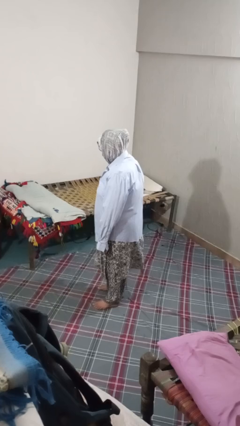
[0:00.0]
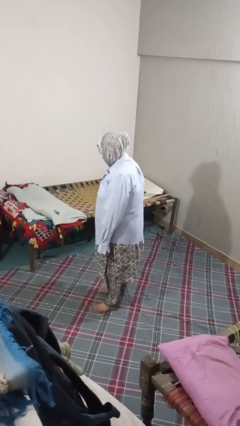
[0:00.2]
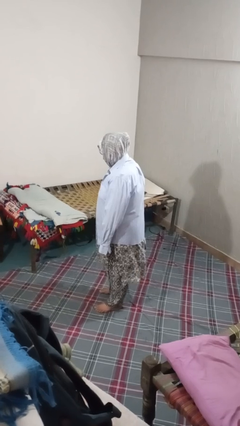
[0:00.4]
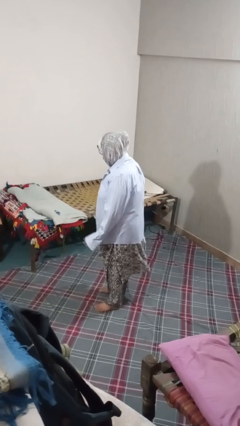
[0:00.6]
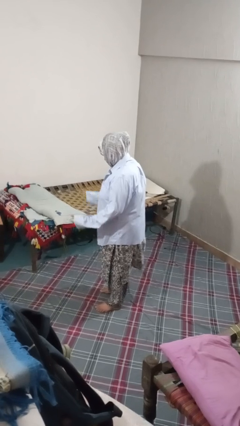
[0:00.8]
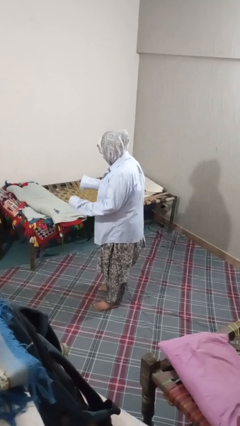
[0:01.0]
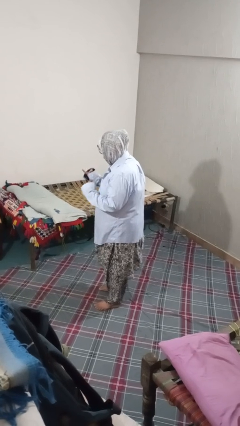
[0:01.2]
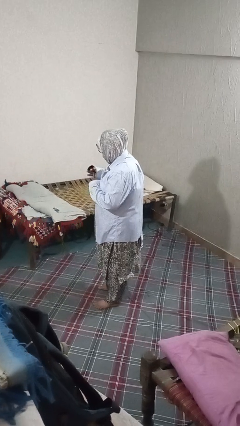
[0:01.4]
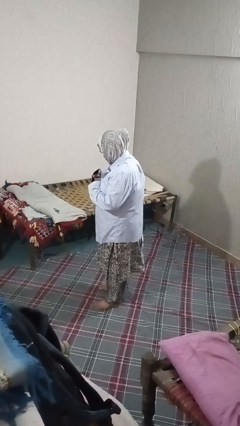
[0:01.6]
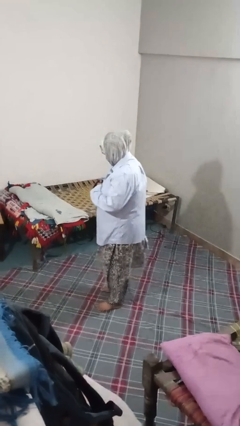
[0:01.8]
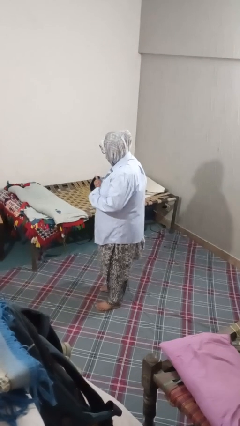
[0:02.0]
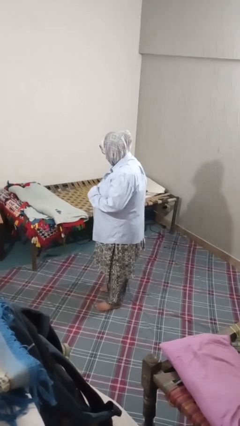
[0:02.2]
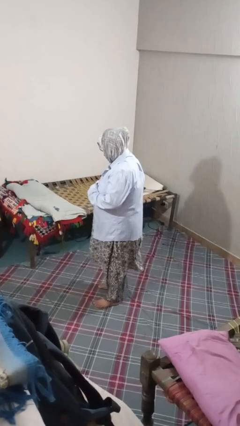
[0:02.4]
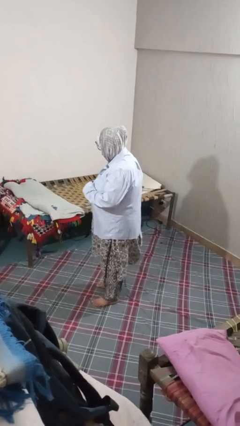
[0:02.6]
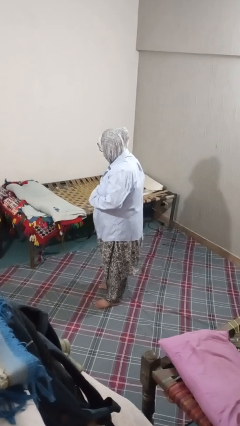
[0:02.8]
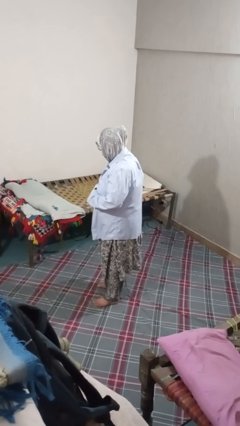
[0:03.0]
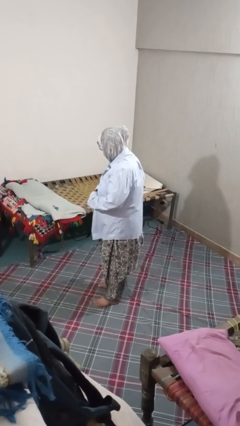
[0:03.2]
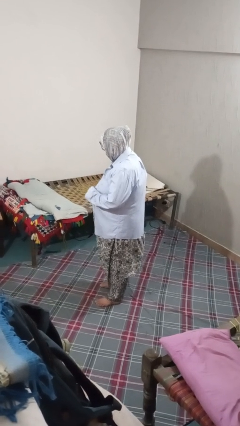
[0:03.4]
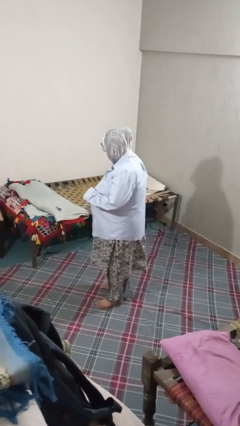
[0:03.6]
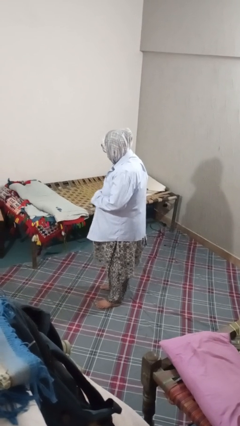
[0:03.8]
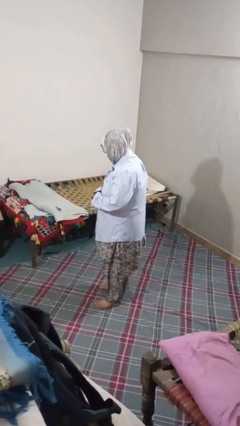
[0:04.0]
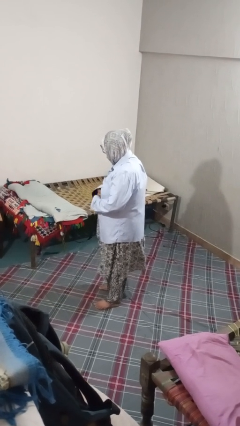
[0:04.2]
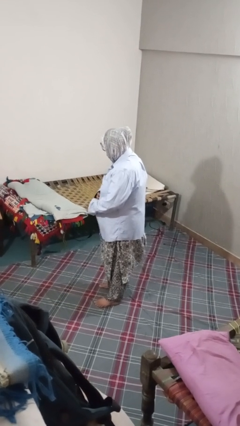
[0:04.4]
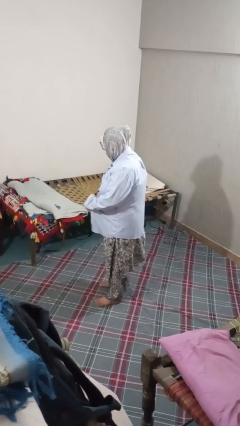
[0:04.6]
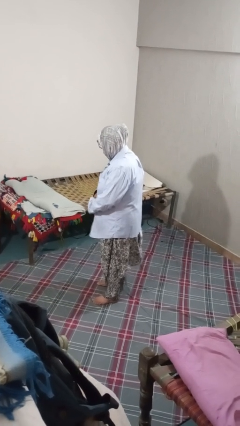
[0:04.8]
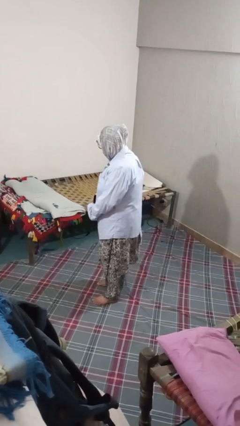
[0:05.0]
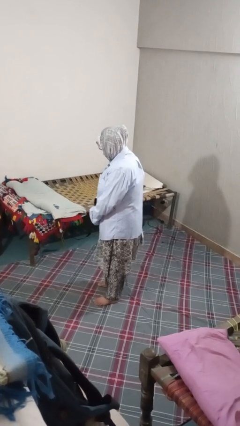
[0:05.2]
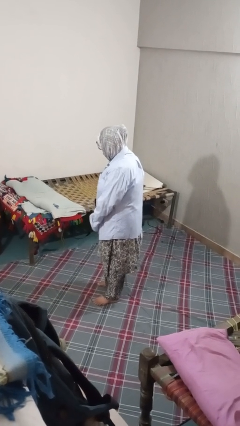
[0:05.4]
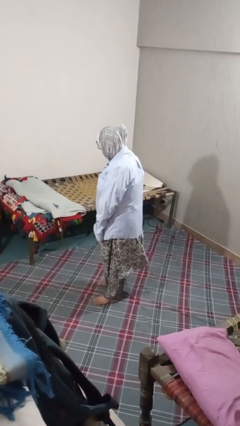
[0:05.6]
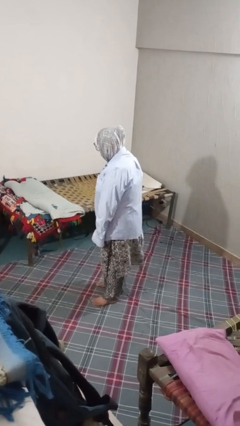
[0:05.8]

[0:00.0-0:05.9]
person buttons shirt

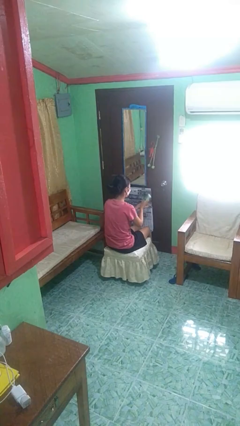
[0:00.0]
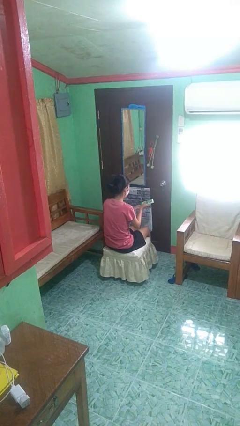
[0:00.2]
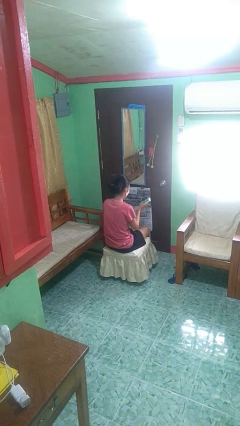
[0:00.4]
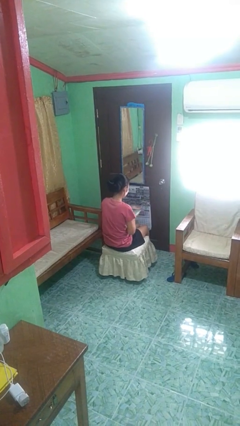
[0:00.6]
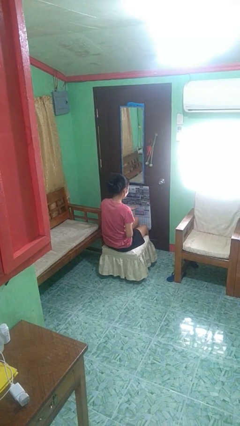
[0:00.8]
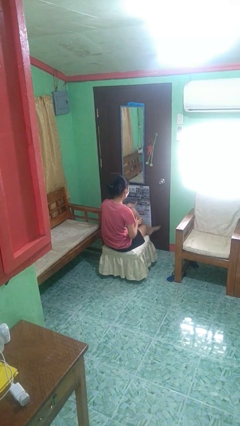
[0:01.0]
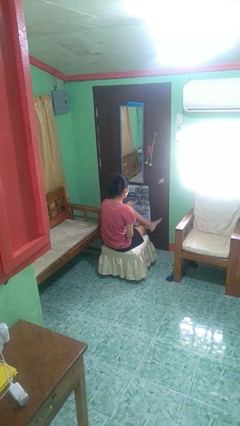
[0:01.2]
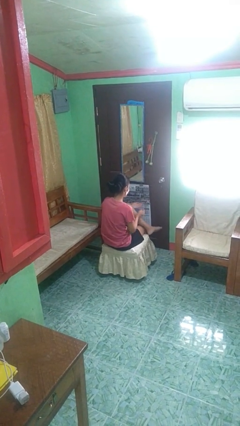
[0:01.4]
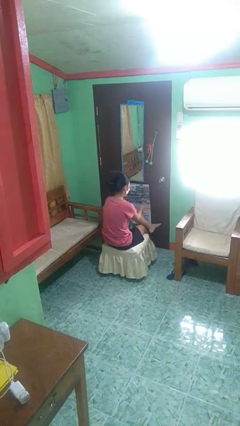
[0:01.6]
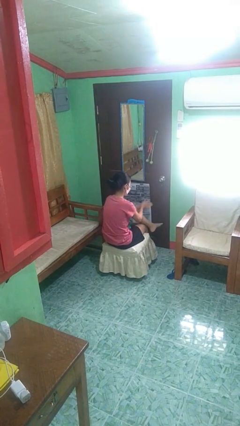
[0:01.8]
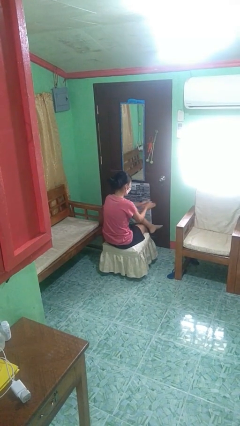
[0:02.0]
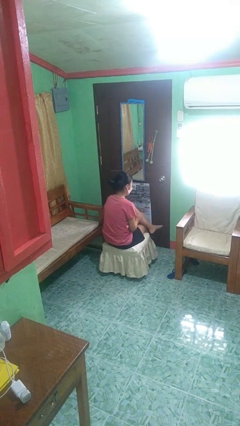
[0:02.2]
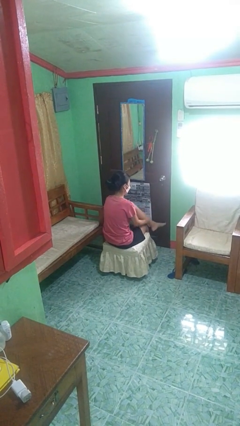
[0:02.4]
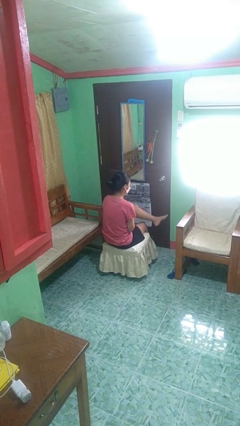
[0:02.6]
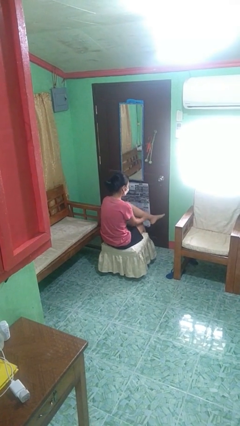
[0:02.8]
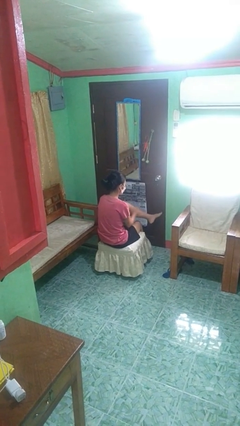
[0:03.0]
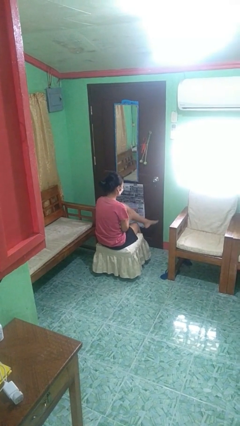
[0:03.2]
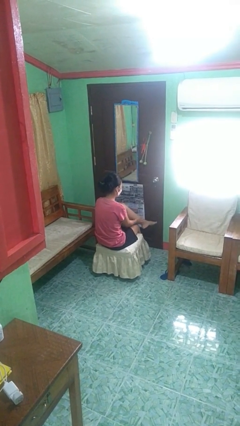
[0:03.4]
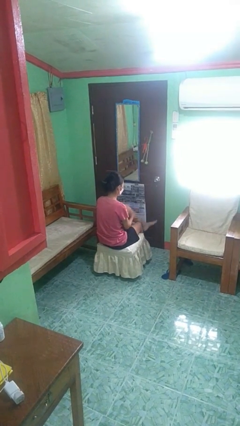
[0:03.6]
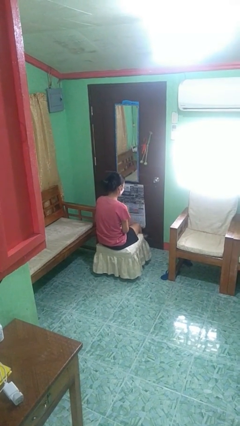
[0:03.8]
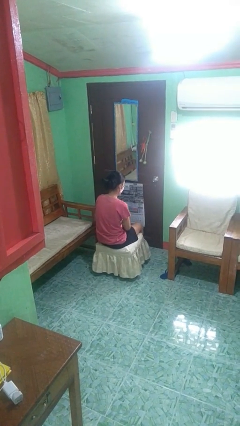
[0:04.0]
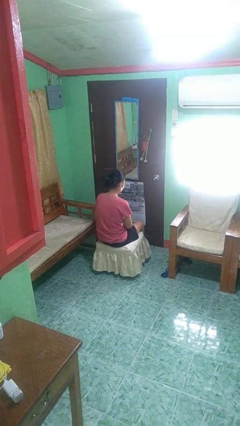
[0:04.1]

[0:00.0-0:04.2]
person applies sunscreen

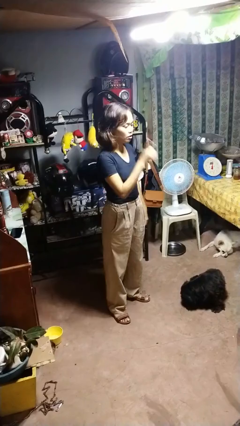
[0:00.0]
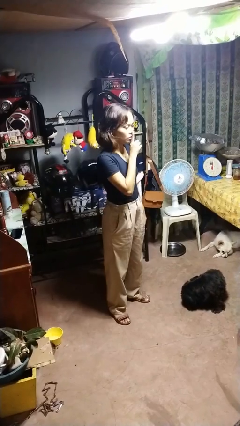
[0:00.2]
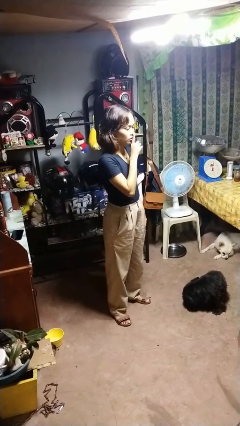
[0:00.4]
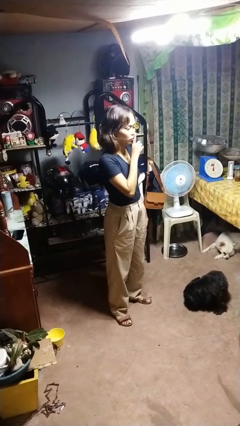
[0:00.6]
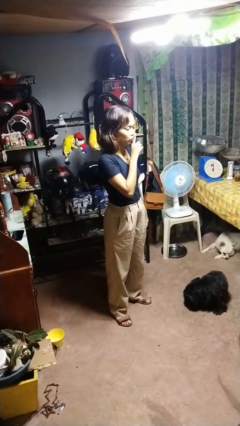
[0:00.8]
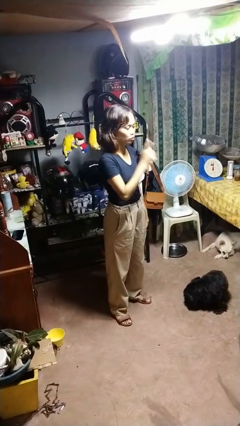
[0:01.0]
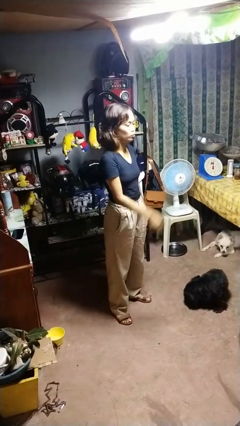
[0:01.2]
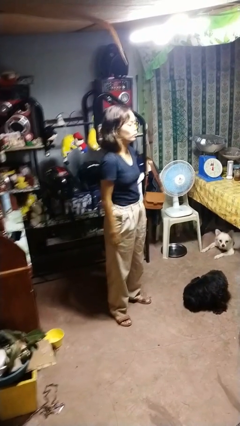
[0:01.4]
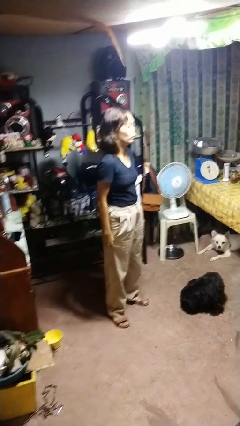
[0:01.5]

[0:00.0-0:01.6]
person gestures be quiet

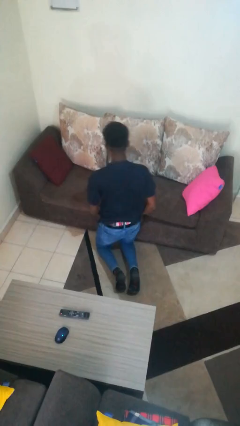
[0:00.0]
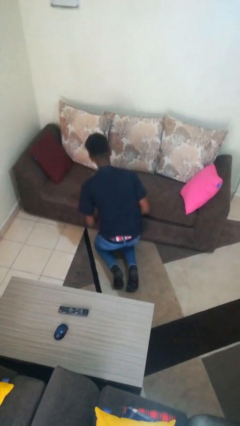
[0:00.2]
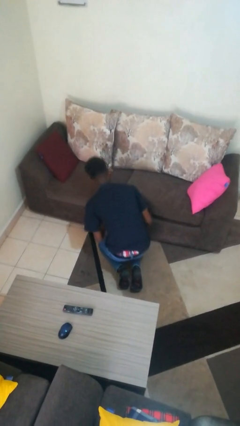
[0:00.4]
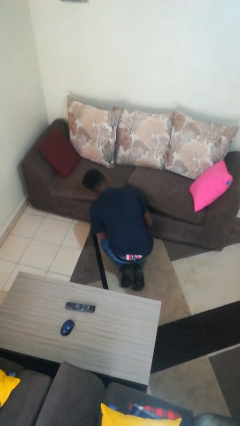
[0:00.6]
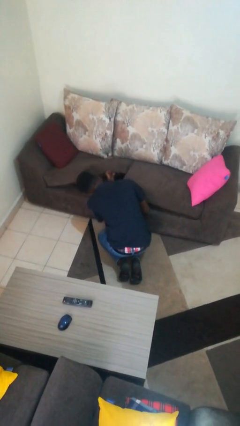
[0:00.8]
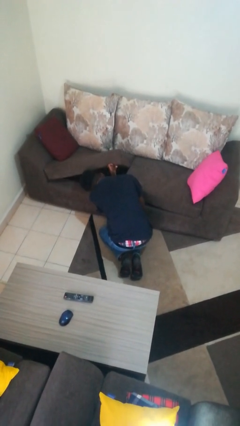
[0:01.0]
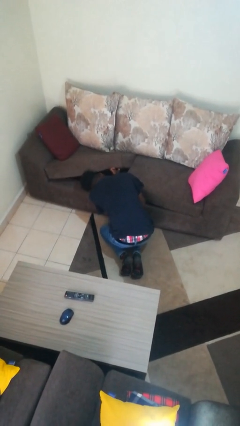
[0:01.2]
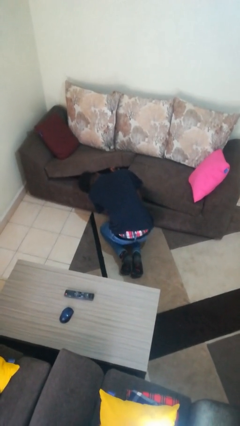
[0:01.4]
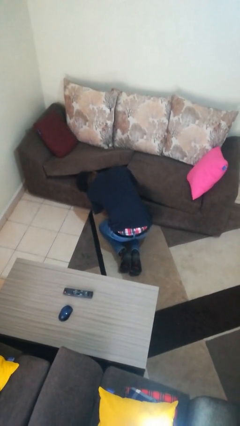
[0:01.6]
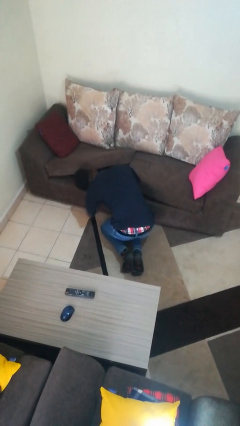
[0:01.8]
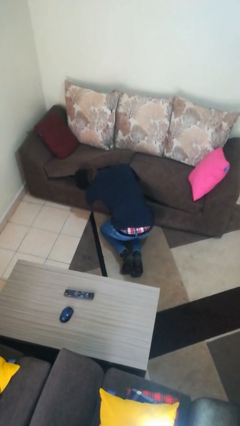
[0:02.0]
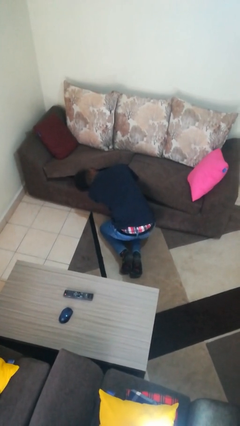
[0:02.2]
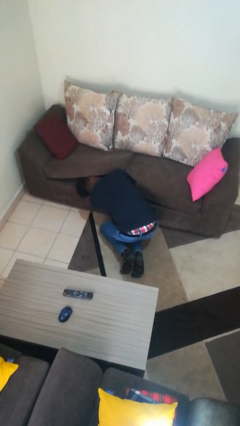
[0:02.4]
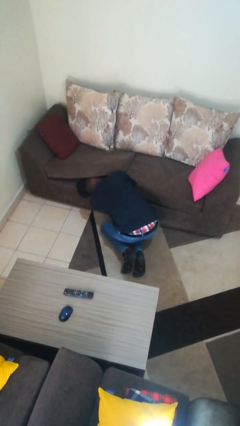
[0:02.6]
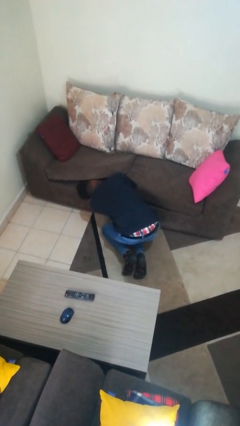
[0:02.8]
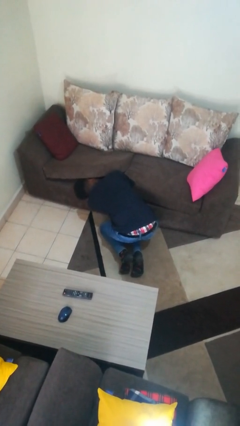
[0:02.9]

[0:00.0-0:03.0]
person searches under couch

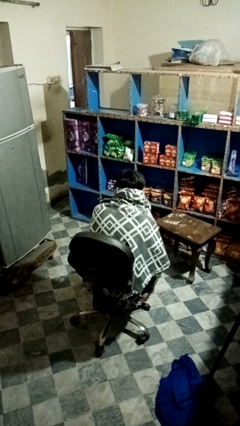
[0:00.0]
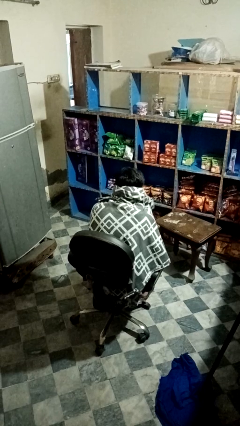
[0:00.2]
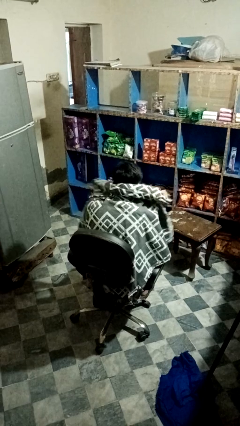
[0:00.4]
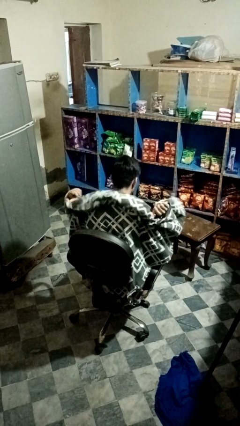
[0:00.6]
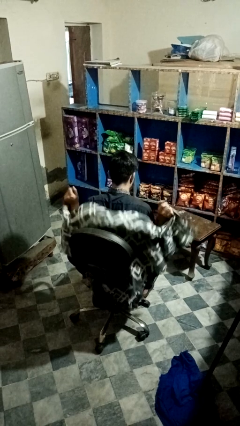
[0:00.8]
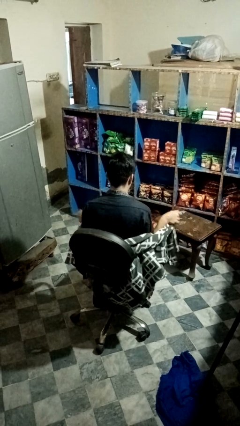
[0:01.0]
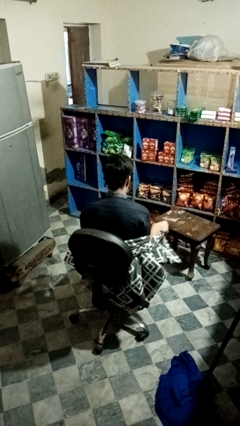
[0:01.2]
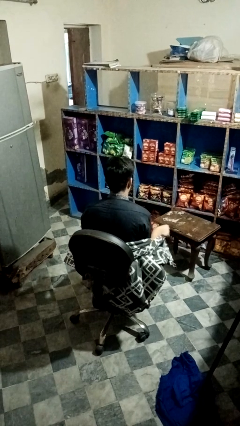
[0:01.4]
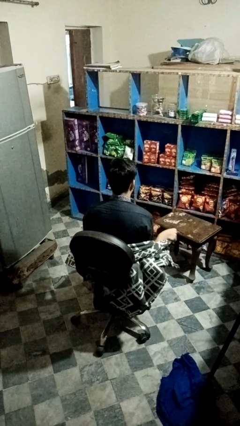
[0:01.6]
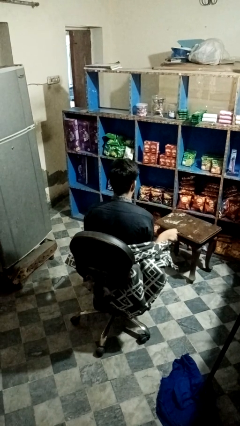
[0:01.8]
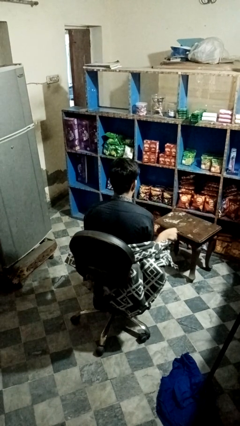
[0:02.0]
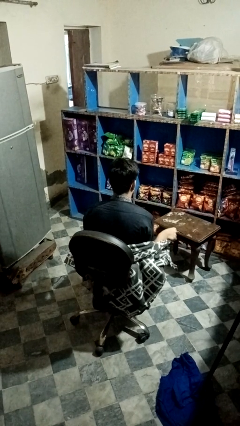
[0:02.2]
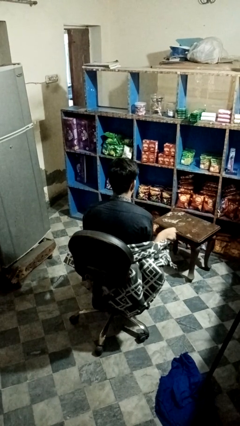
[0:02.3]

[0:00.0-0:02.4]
person uncovers with blanket

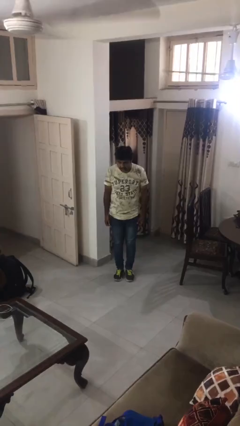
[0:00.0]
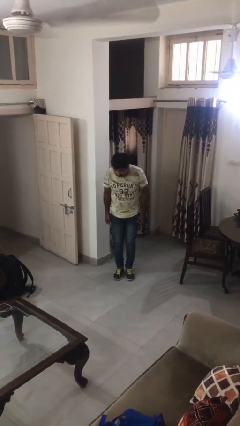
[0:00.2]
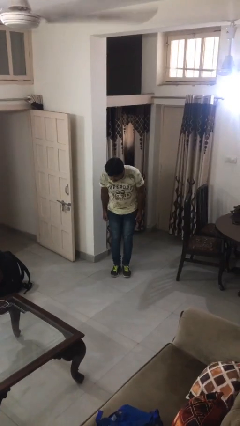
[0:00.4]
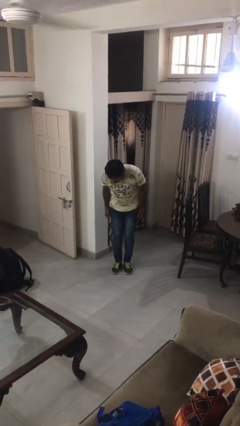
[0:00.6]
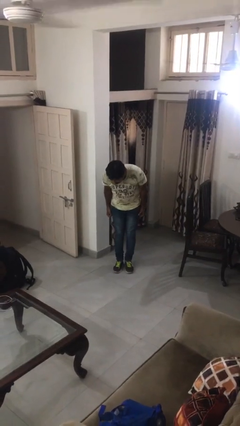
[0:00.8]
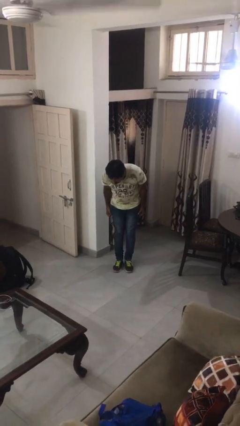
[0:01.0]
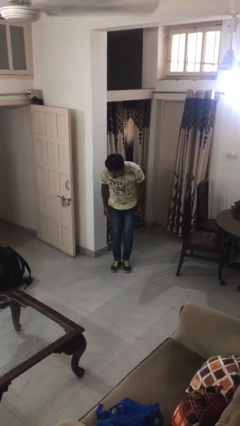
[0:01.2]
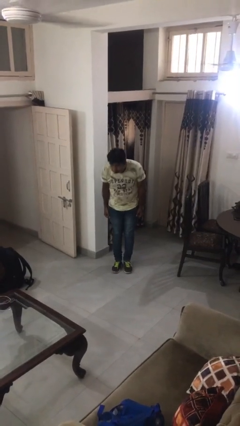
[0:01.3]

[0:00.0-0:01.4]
person bows
